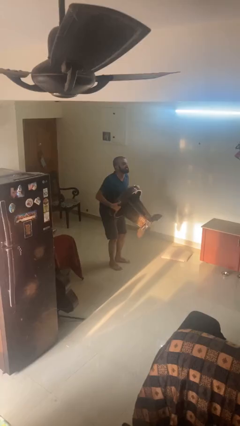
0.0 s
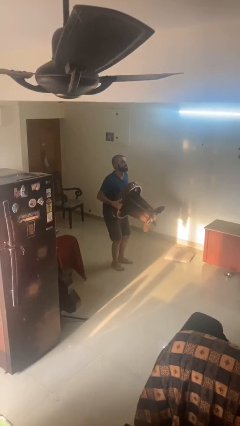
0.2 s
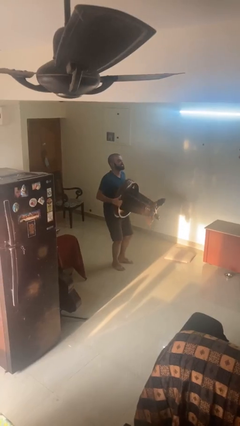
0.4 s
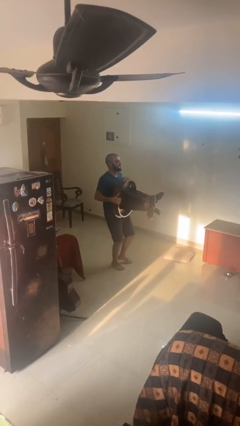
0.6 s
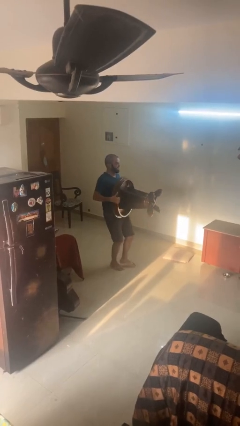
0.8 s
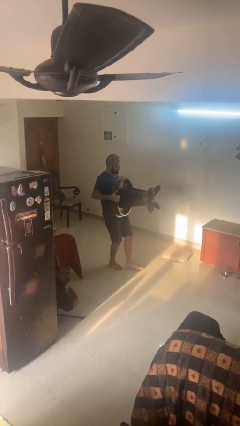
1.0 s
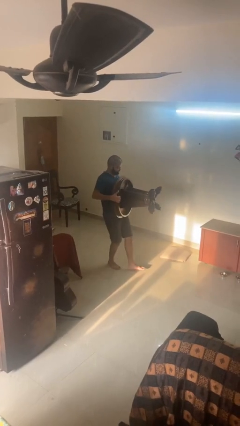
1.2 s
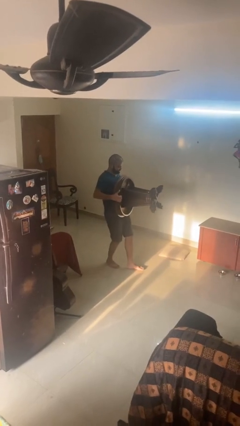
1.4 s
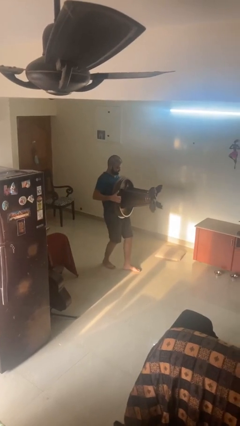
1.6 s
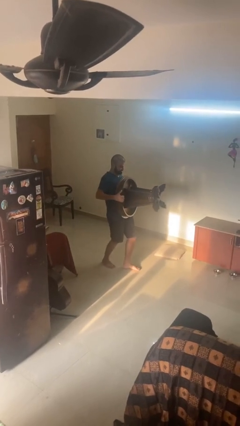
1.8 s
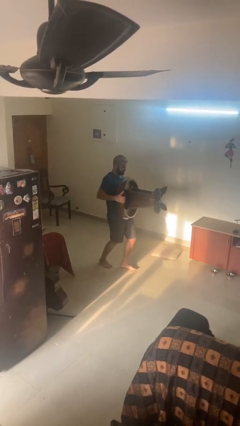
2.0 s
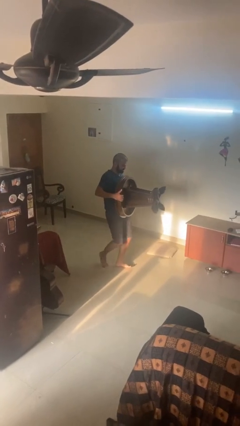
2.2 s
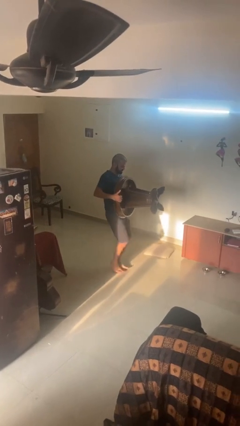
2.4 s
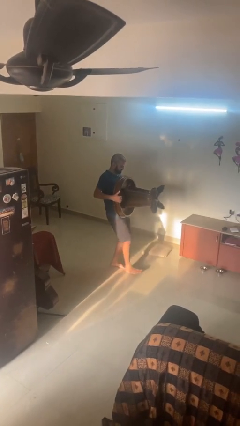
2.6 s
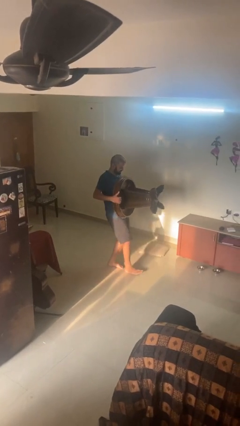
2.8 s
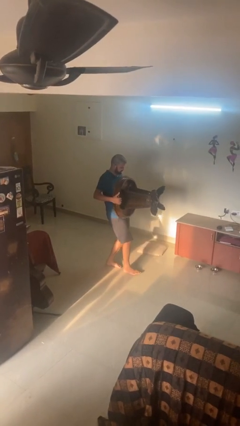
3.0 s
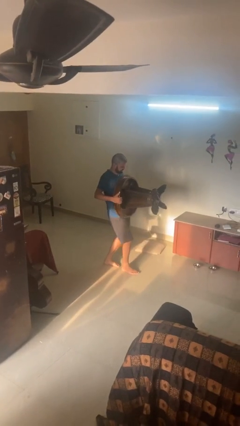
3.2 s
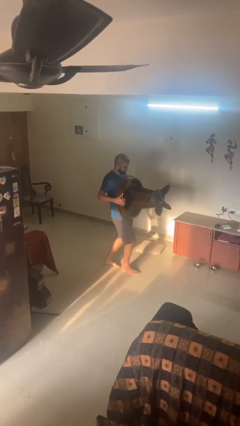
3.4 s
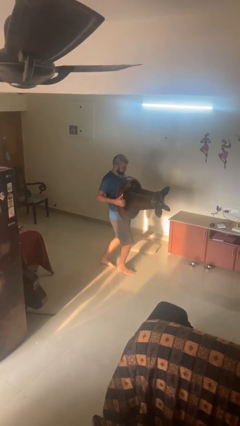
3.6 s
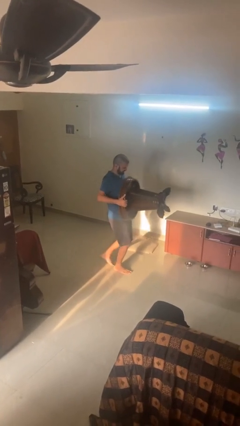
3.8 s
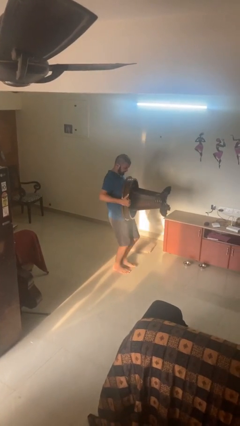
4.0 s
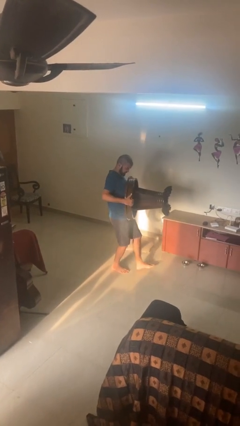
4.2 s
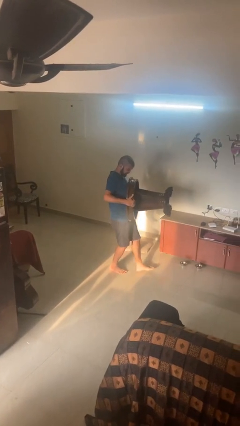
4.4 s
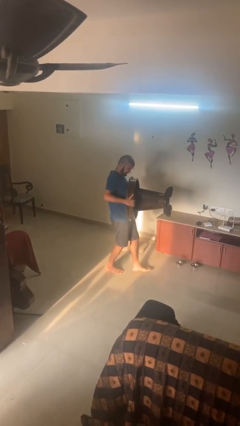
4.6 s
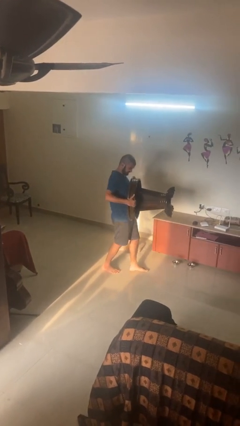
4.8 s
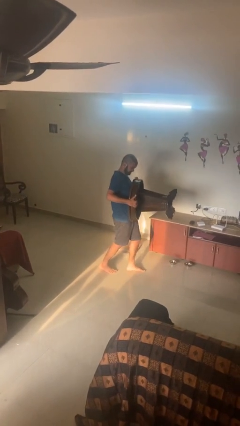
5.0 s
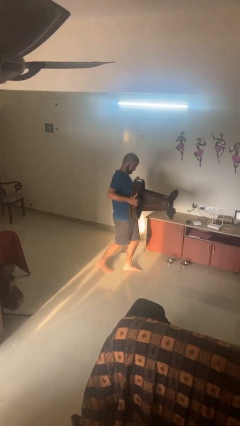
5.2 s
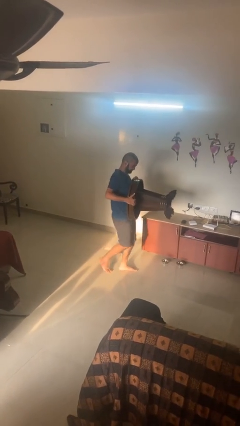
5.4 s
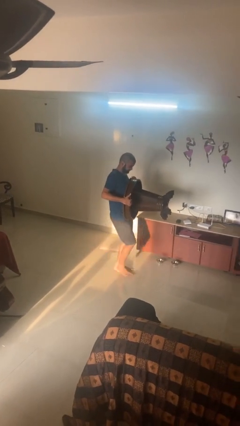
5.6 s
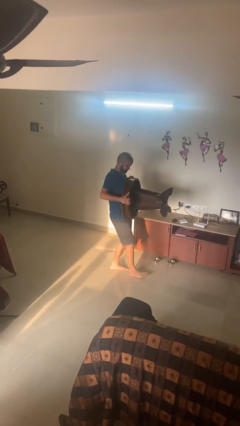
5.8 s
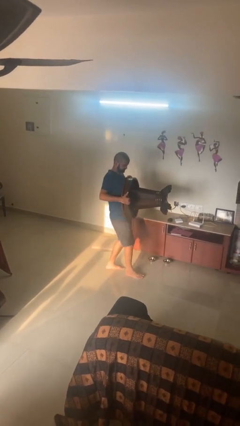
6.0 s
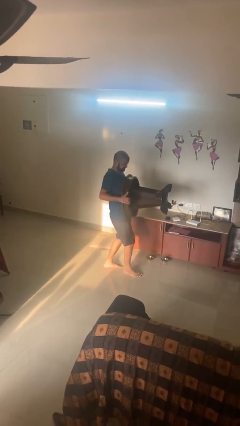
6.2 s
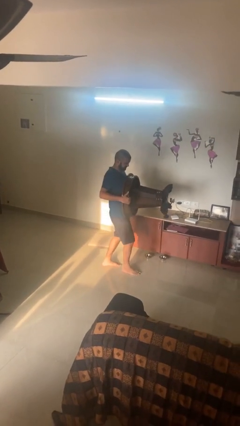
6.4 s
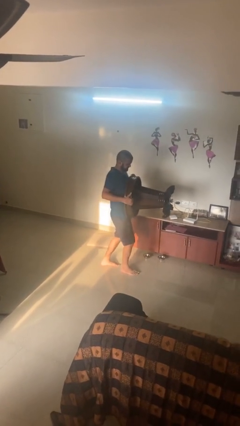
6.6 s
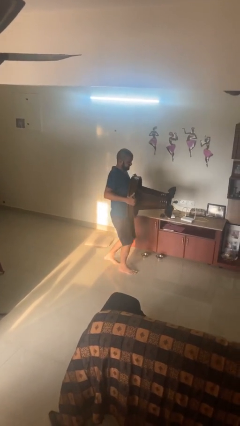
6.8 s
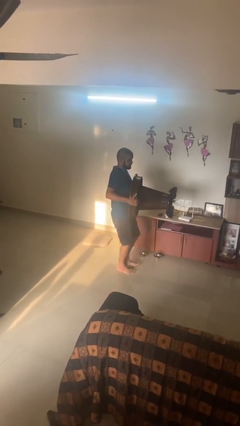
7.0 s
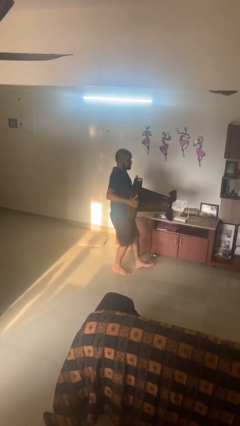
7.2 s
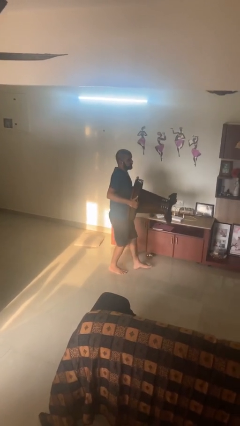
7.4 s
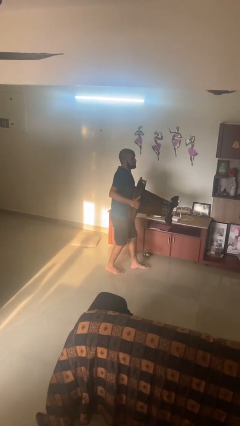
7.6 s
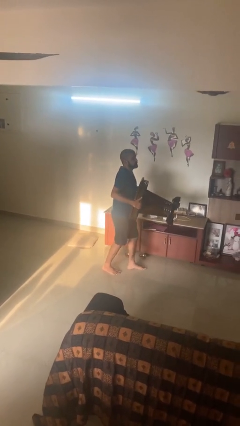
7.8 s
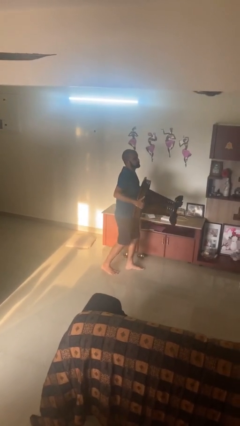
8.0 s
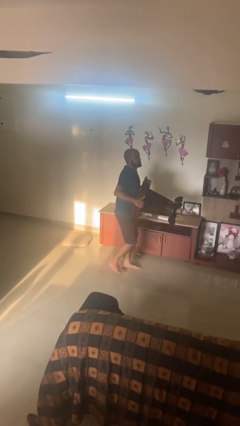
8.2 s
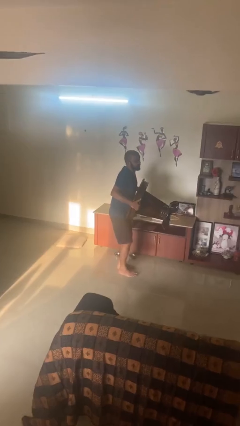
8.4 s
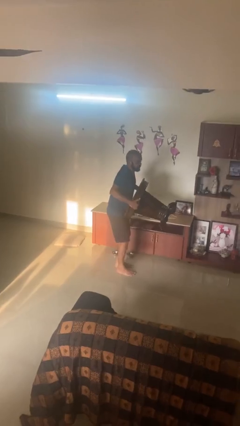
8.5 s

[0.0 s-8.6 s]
person carries heavy object

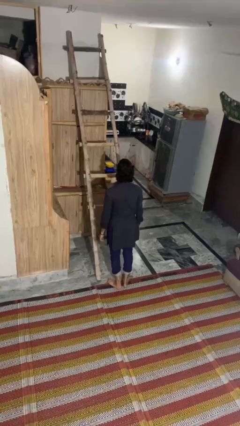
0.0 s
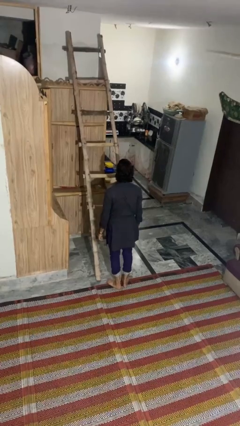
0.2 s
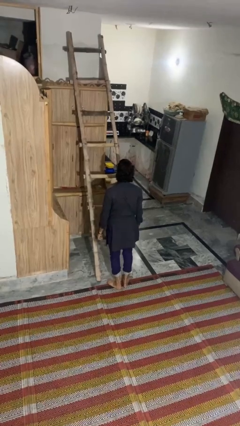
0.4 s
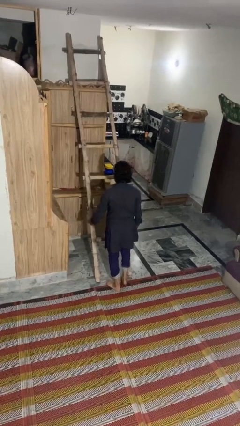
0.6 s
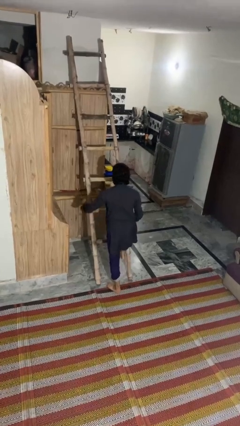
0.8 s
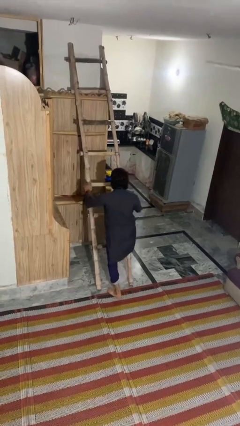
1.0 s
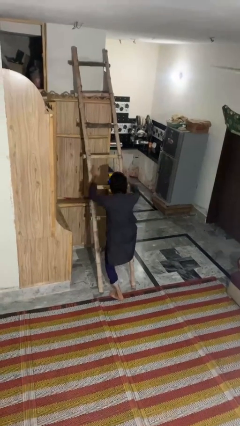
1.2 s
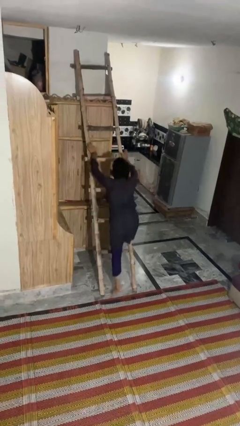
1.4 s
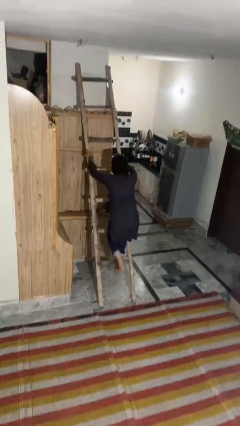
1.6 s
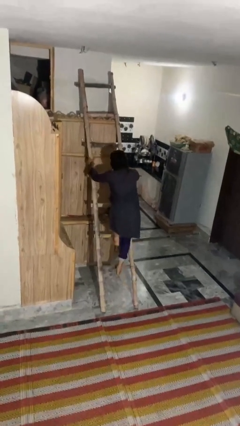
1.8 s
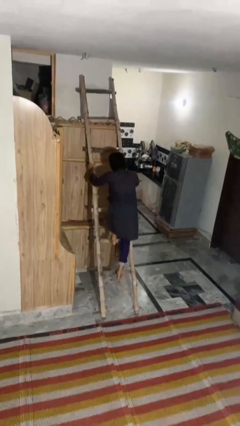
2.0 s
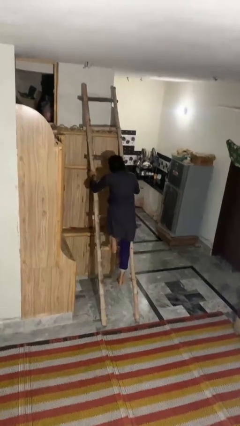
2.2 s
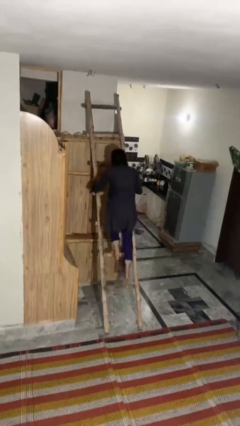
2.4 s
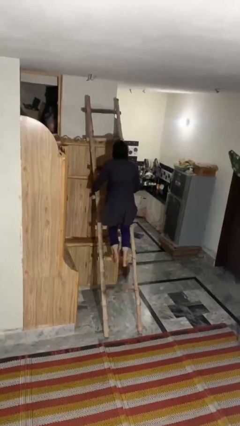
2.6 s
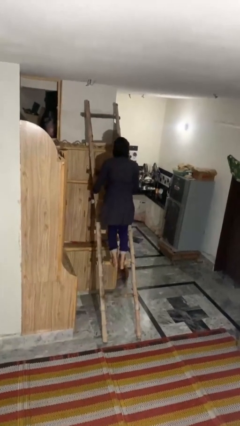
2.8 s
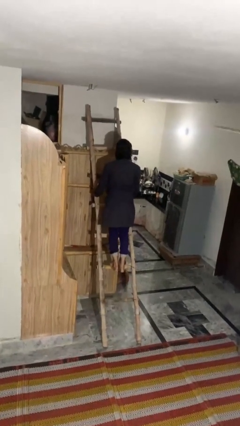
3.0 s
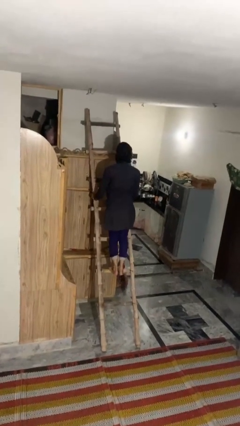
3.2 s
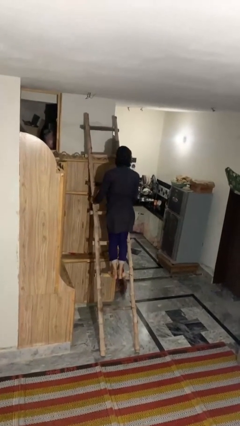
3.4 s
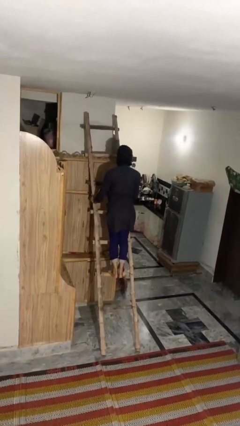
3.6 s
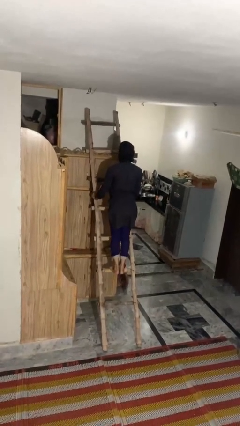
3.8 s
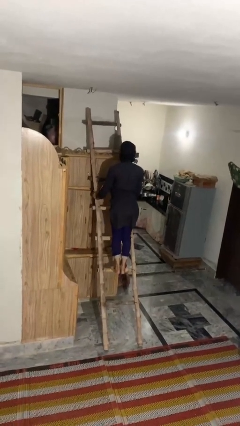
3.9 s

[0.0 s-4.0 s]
person climbs up ladder

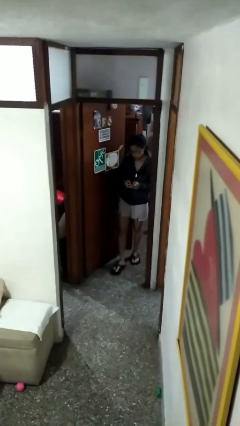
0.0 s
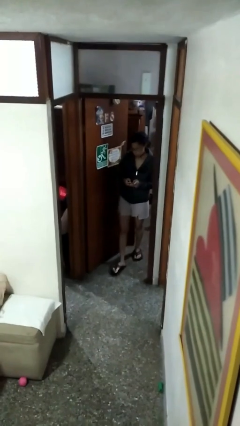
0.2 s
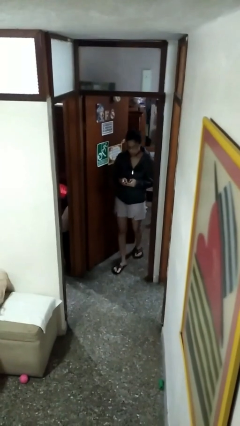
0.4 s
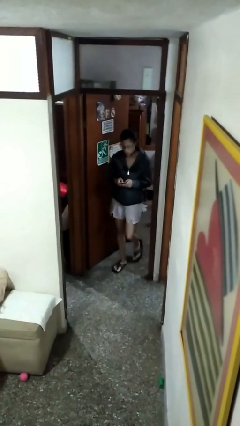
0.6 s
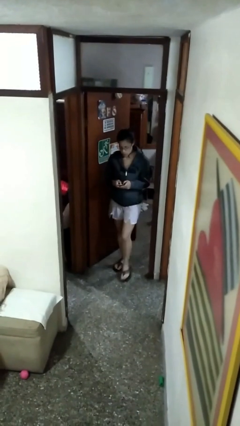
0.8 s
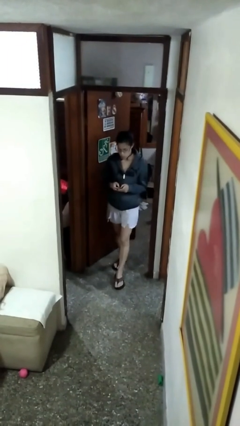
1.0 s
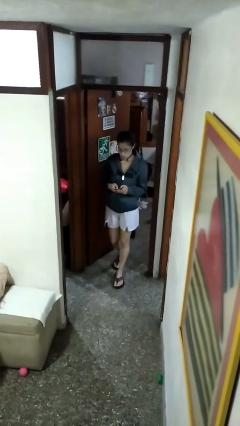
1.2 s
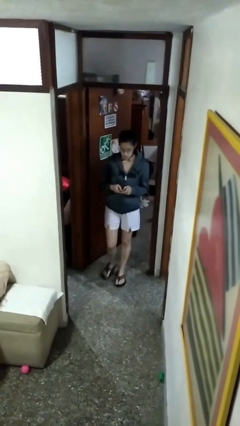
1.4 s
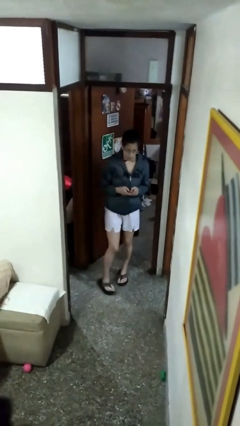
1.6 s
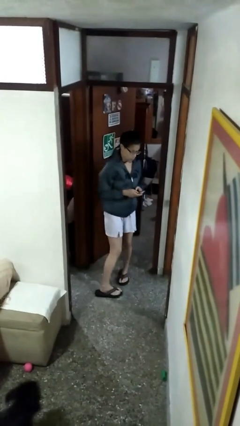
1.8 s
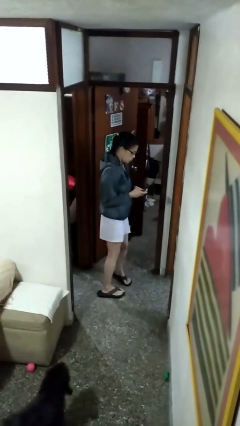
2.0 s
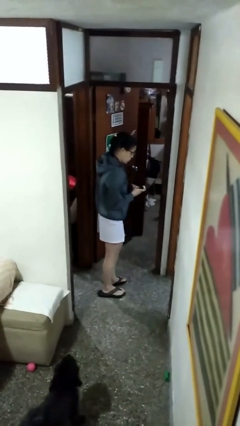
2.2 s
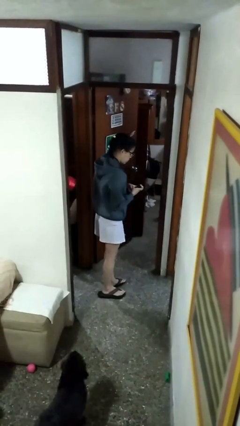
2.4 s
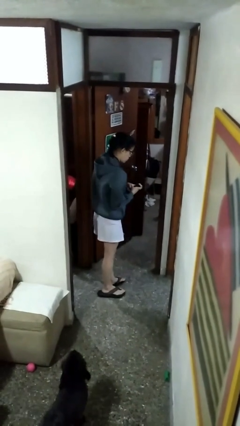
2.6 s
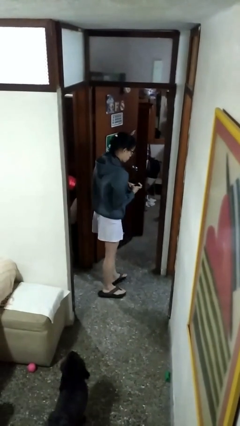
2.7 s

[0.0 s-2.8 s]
person enters scene through structure

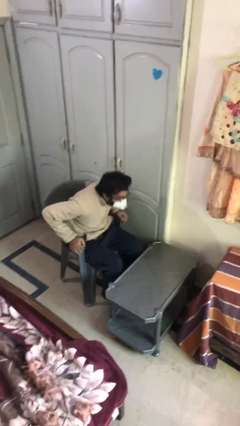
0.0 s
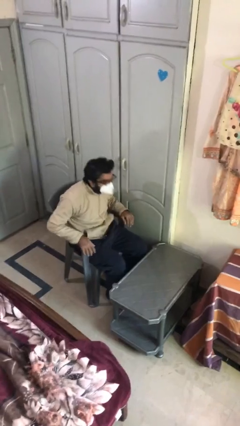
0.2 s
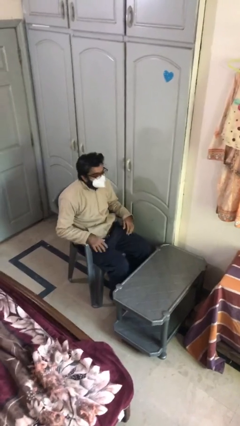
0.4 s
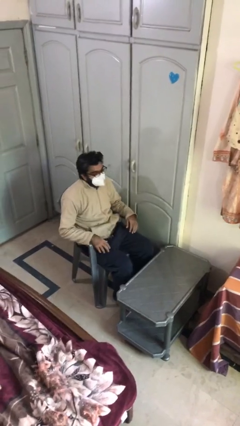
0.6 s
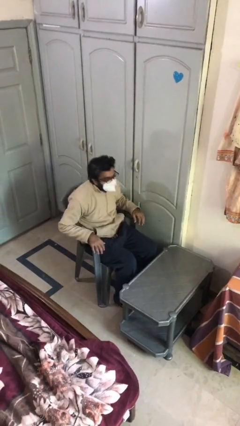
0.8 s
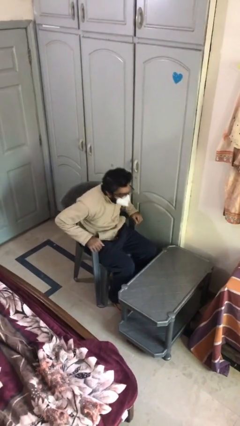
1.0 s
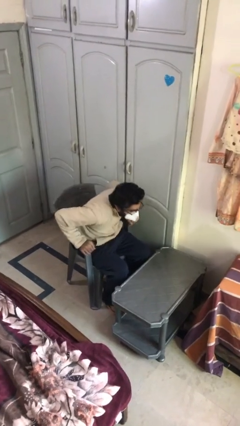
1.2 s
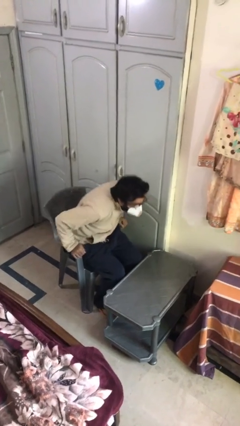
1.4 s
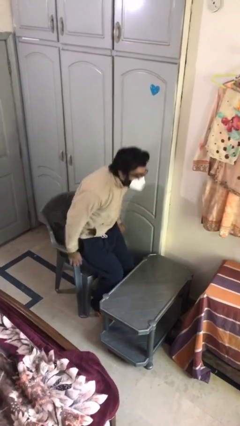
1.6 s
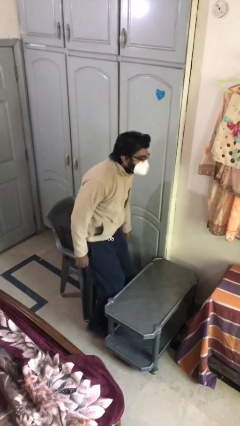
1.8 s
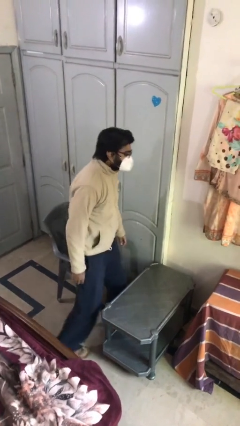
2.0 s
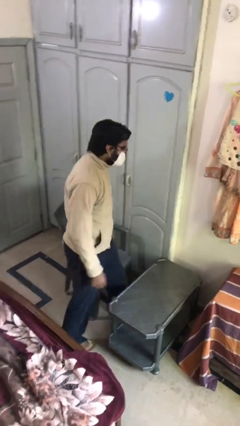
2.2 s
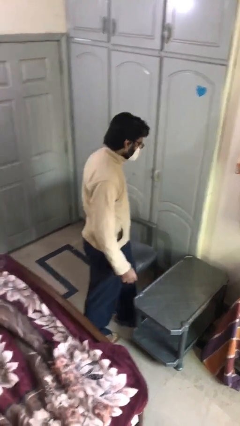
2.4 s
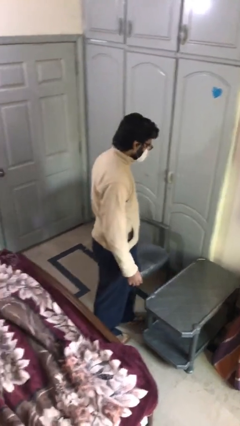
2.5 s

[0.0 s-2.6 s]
person stands up
